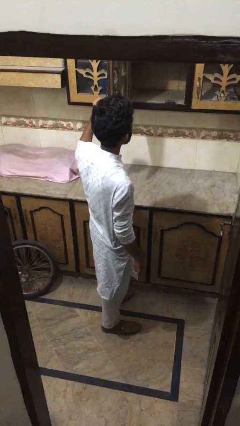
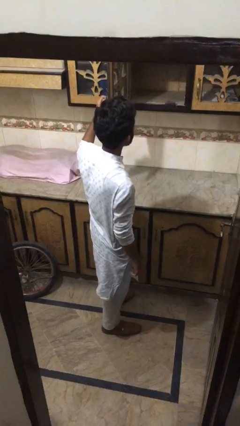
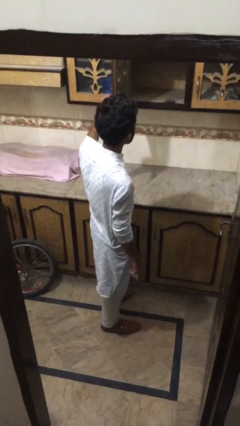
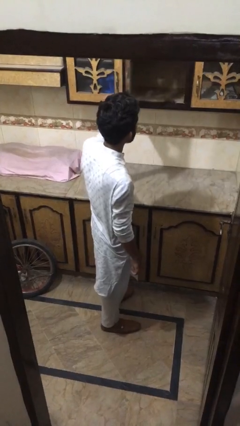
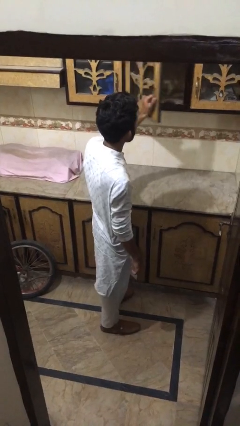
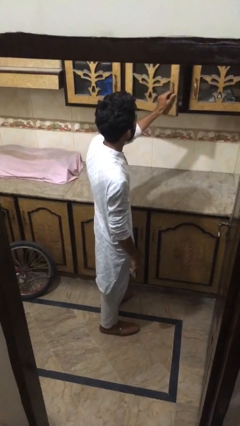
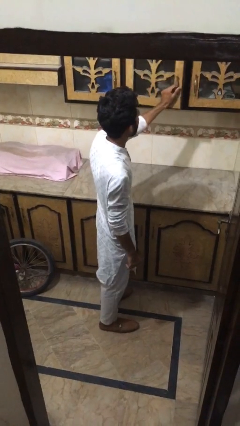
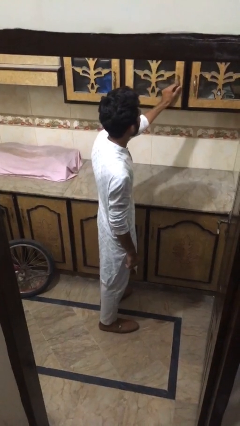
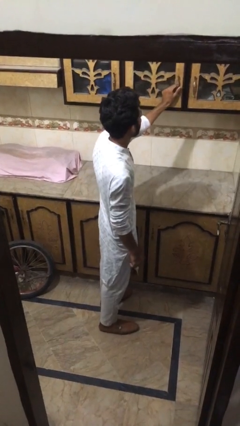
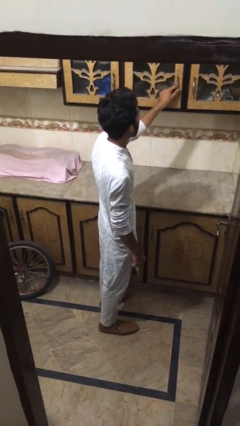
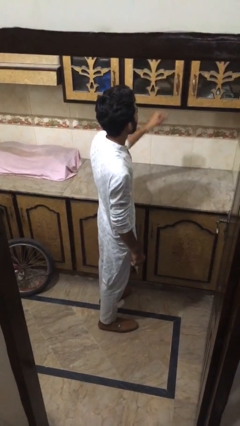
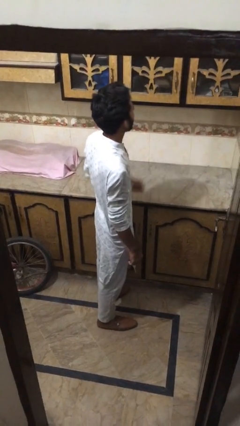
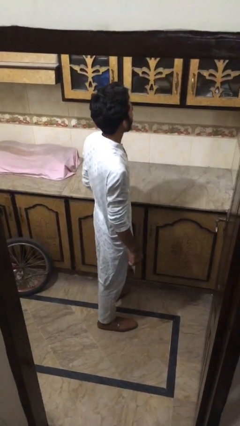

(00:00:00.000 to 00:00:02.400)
person closes cabinet

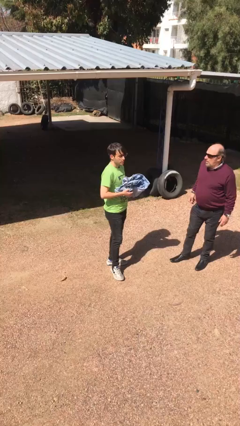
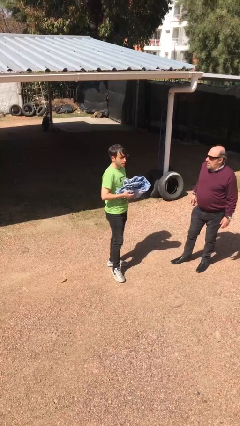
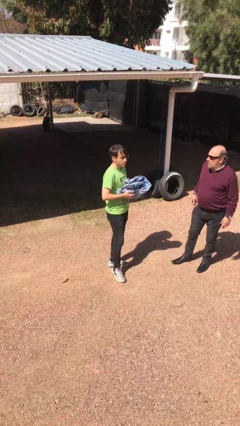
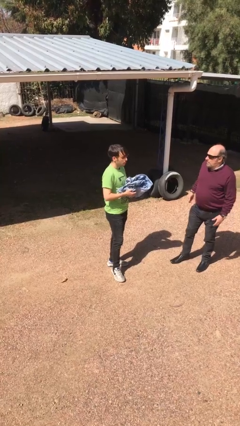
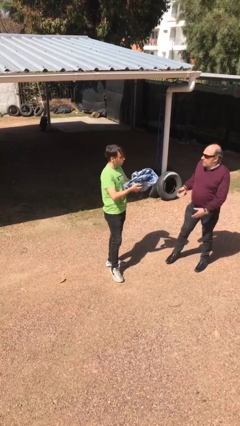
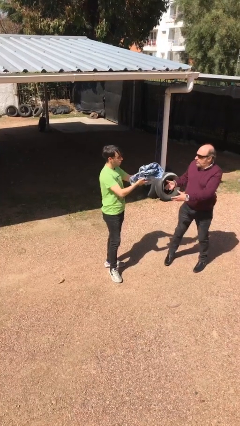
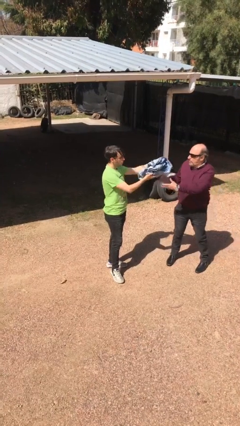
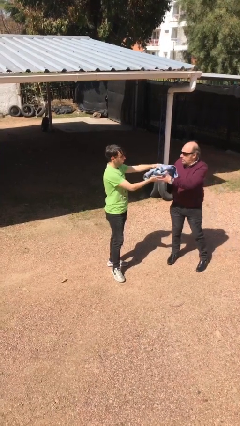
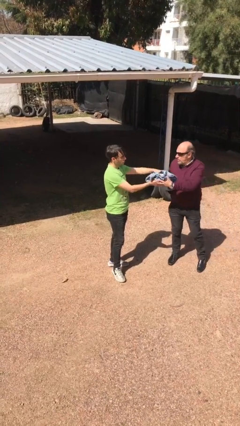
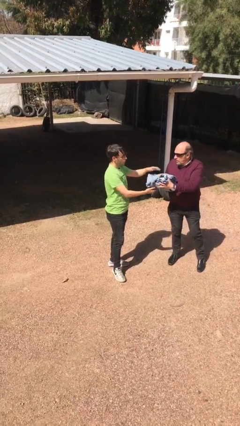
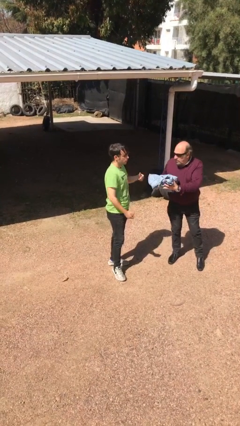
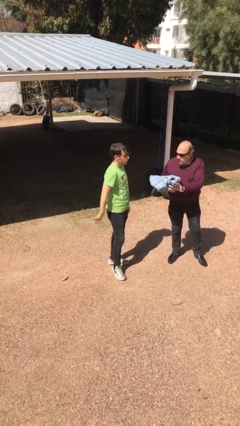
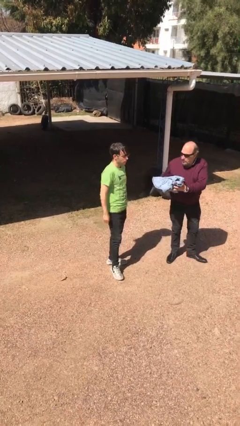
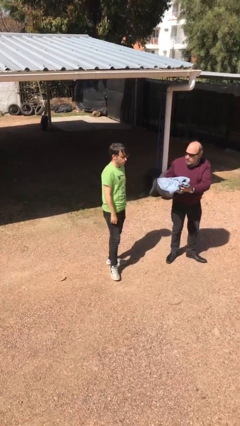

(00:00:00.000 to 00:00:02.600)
person transfers object to person

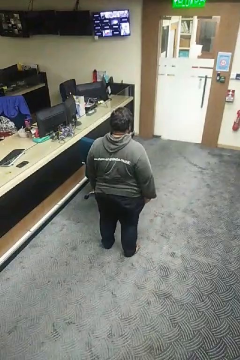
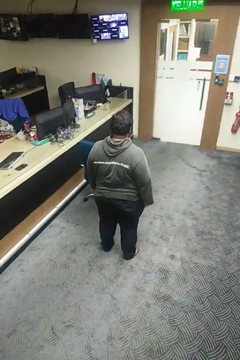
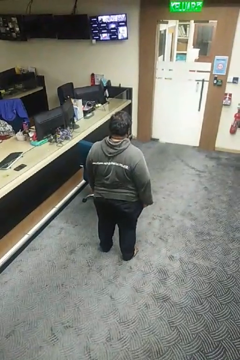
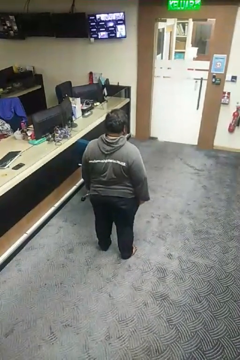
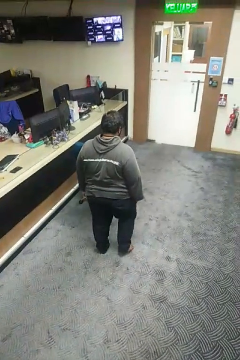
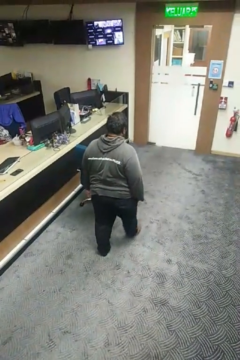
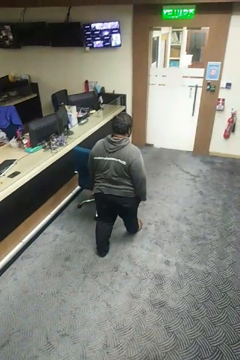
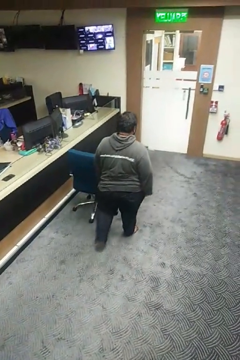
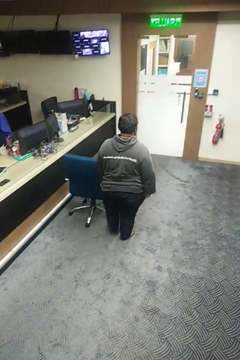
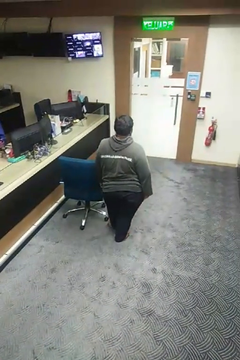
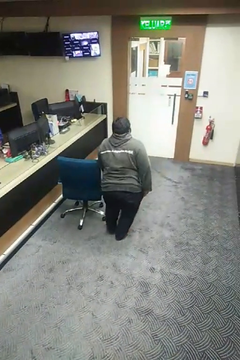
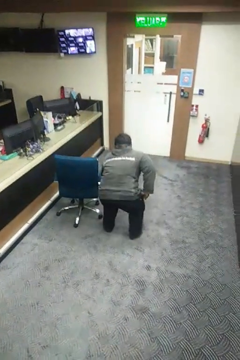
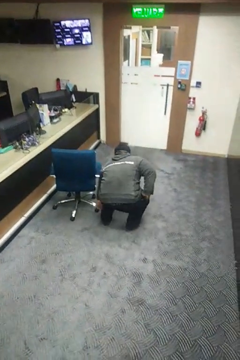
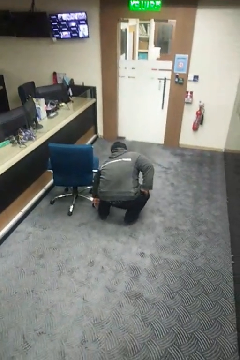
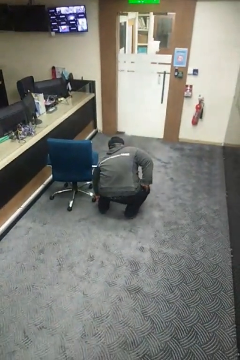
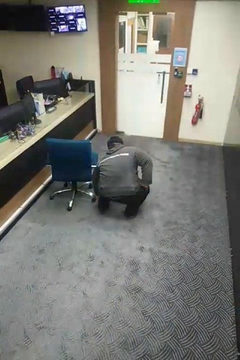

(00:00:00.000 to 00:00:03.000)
person stubs toe

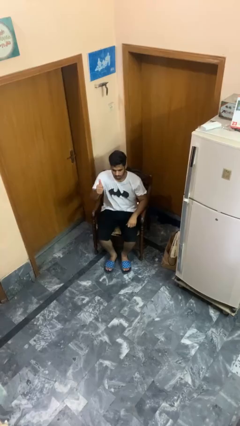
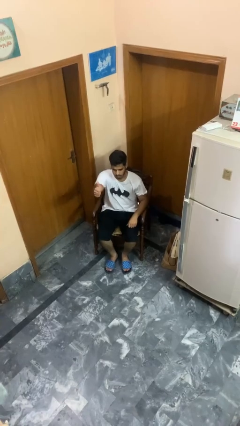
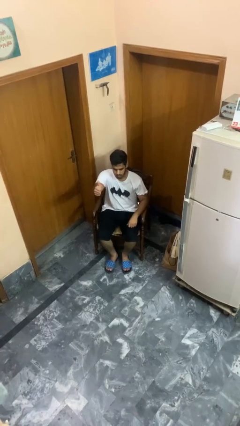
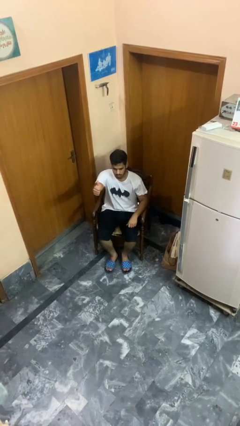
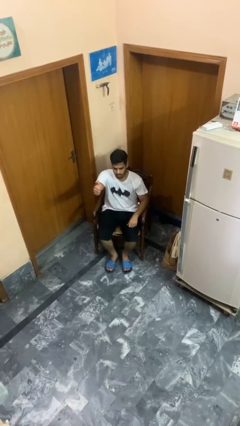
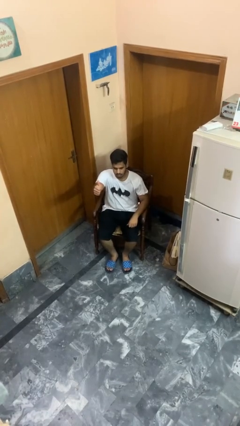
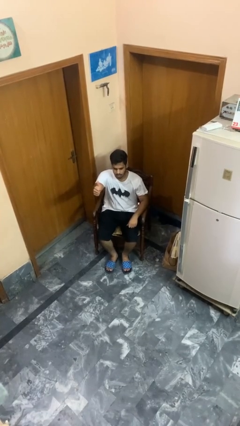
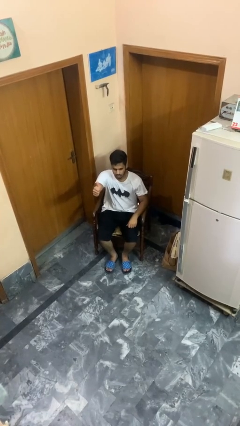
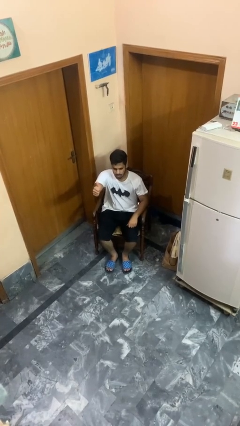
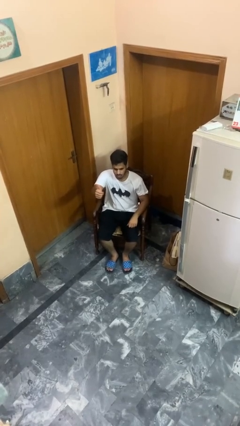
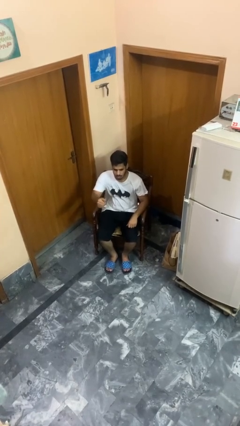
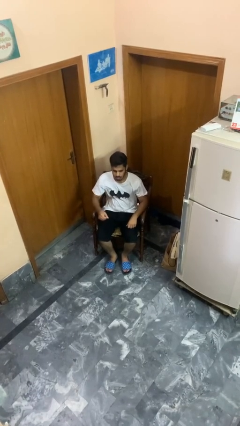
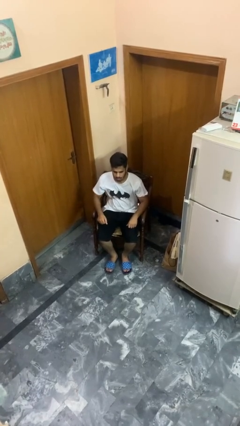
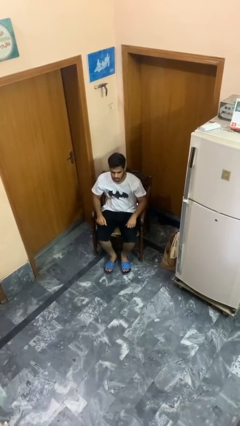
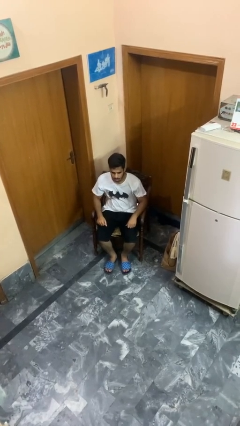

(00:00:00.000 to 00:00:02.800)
person gestures thumbs up

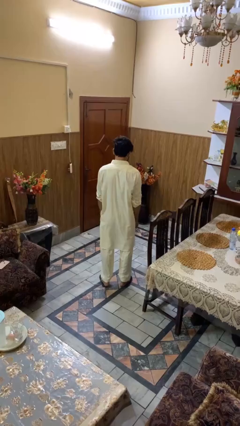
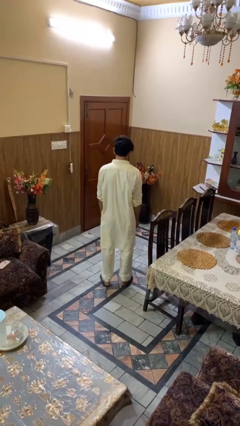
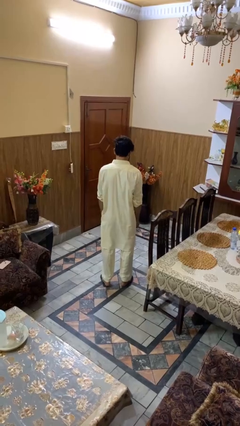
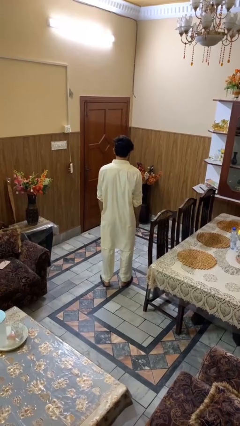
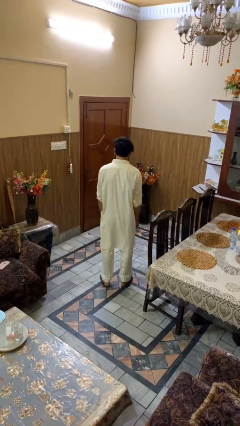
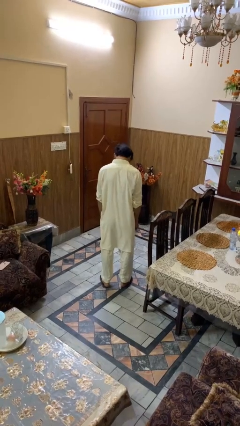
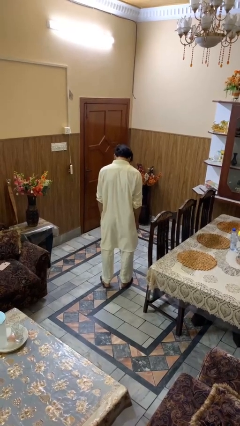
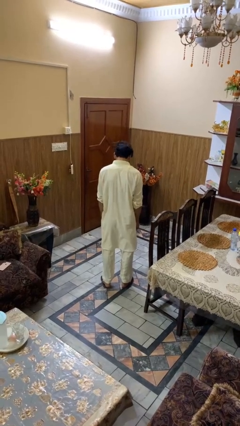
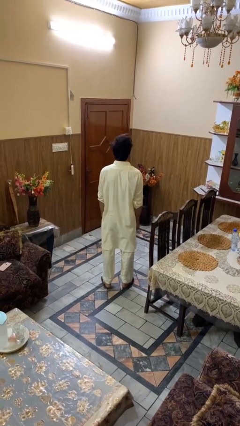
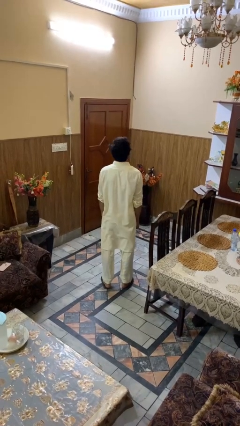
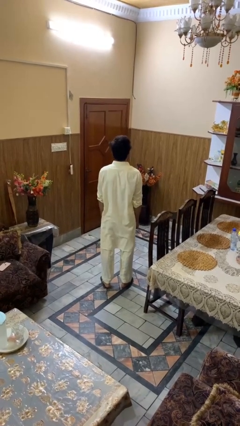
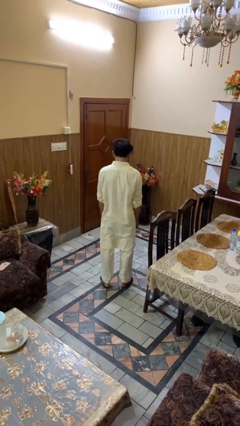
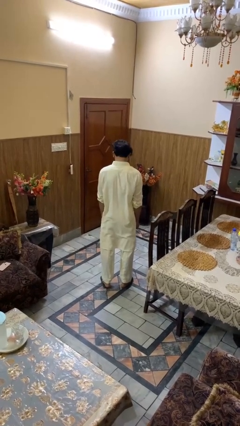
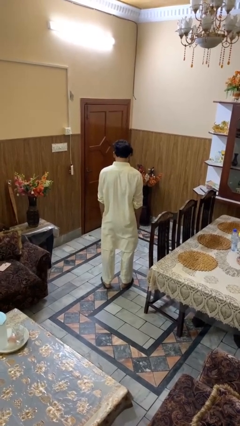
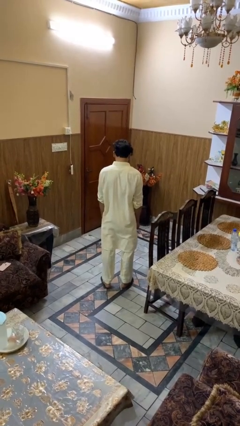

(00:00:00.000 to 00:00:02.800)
person nods head

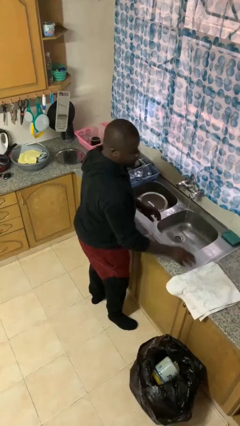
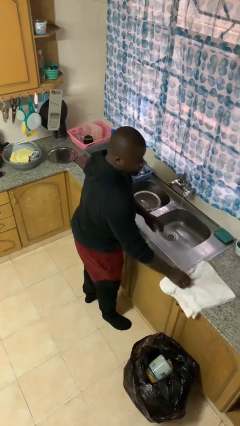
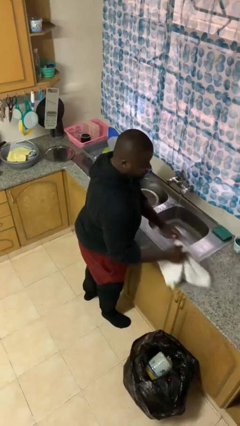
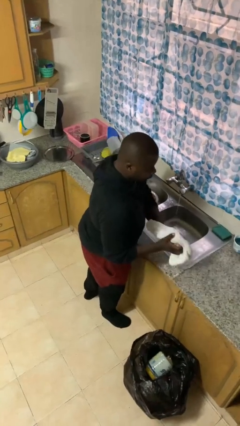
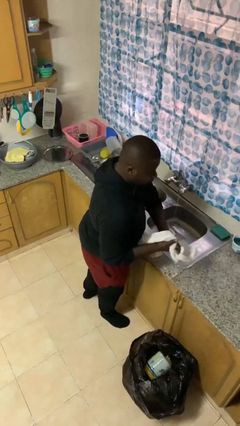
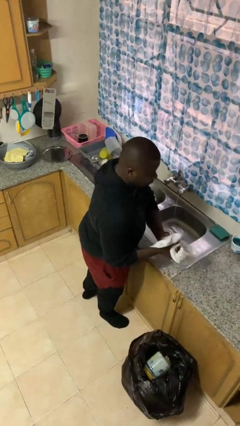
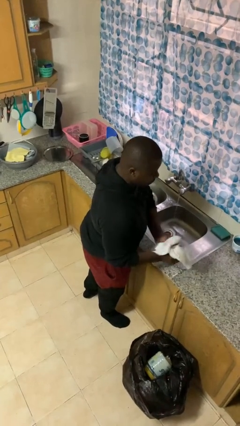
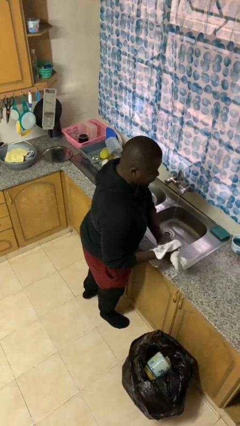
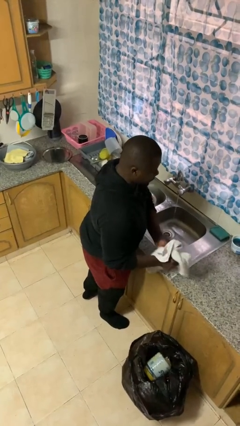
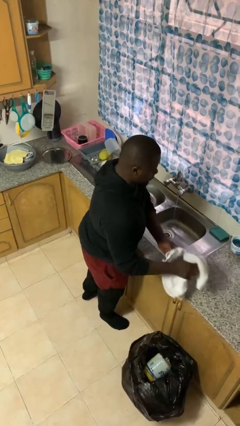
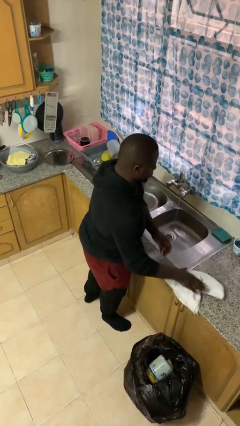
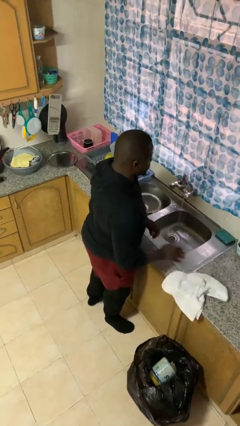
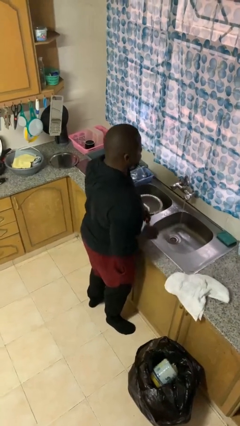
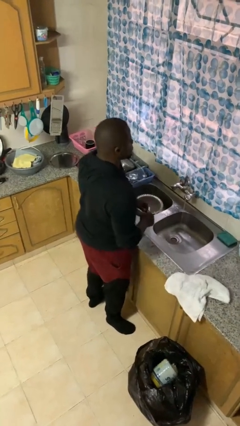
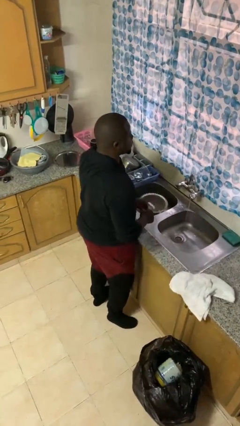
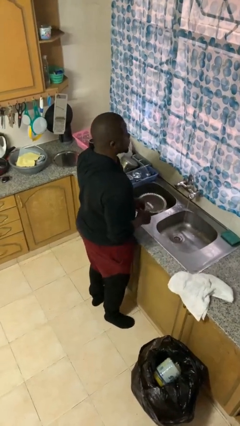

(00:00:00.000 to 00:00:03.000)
person dries hands with towel

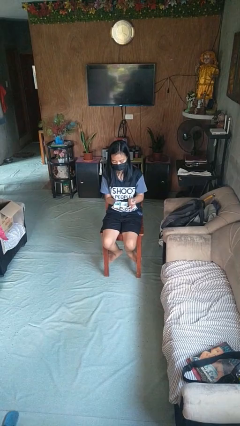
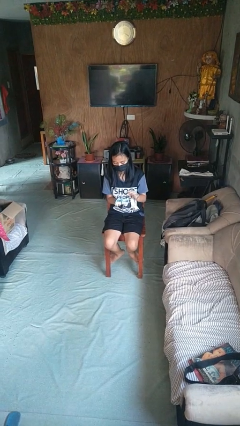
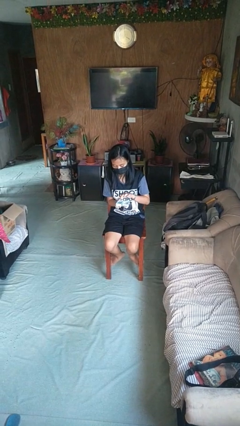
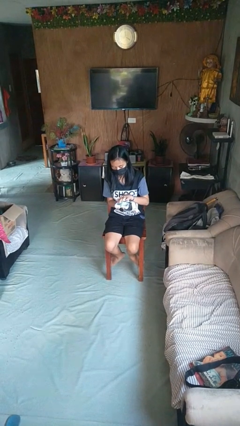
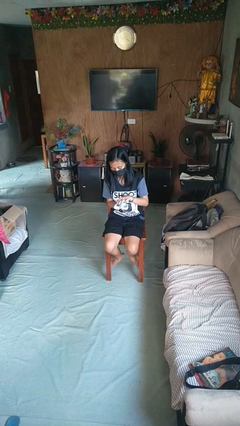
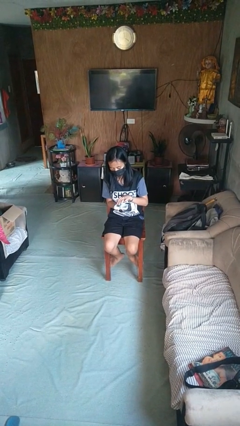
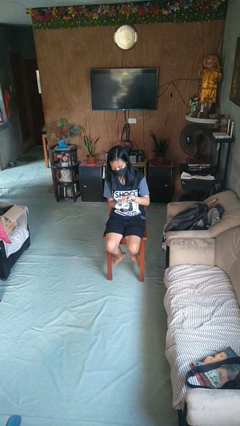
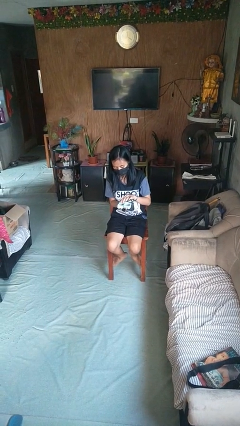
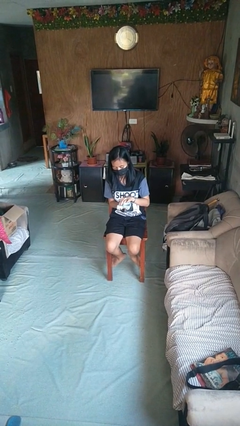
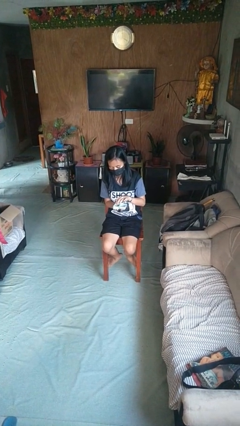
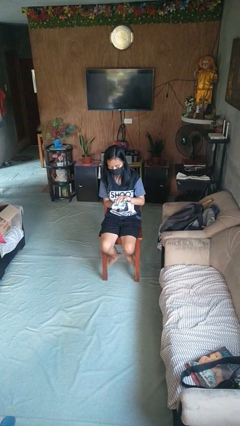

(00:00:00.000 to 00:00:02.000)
person searches jewelry box
